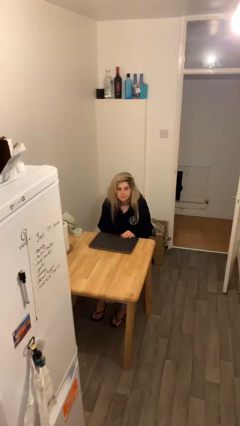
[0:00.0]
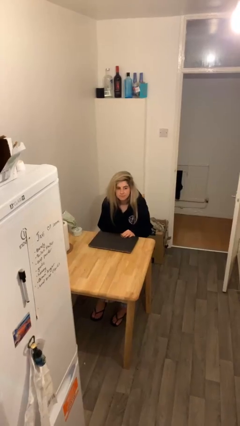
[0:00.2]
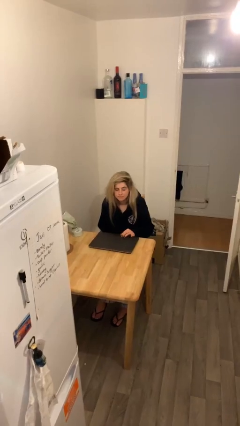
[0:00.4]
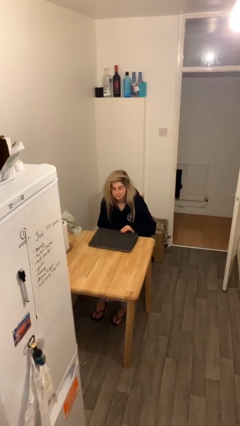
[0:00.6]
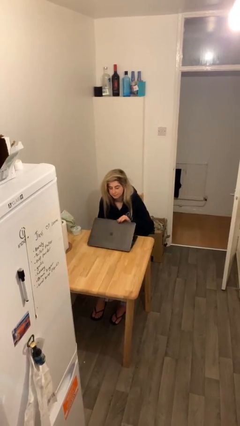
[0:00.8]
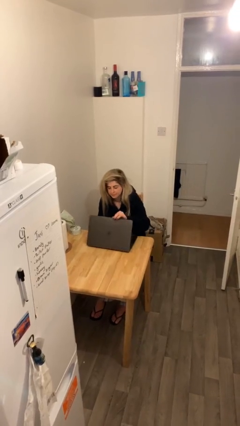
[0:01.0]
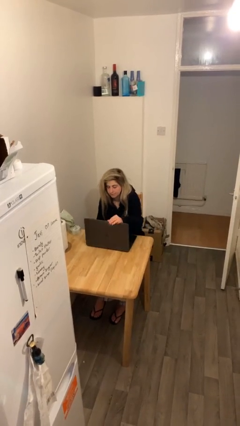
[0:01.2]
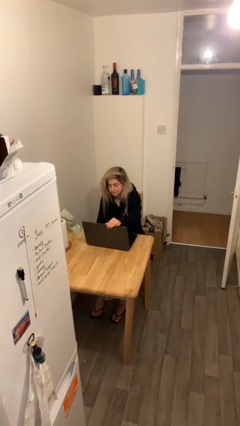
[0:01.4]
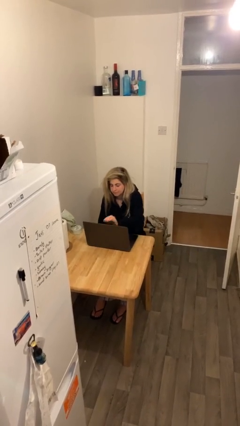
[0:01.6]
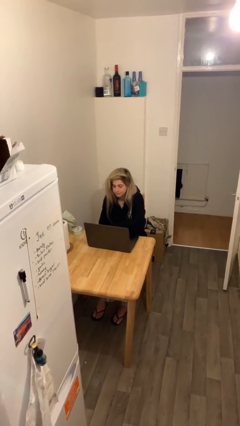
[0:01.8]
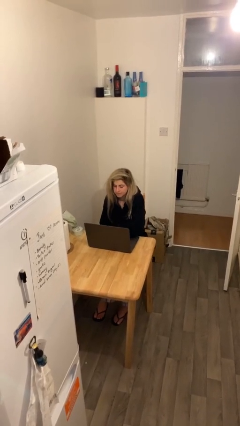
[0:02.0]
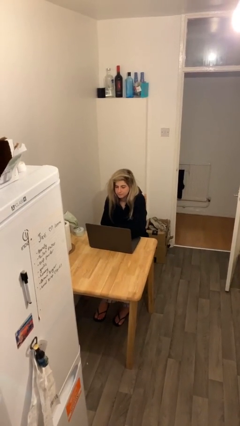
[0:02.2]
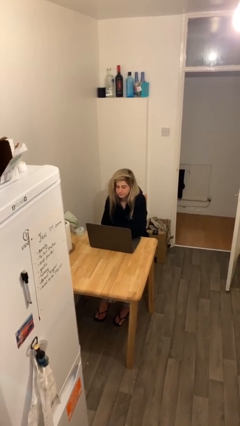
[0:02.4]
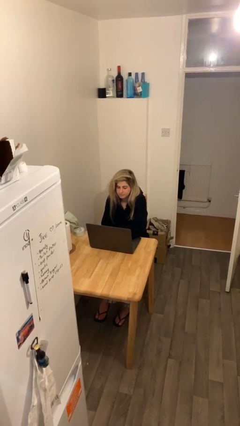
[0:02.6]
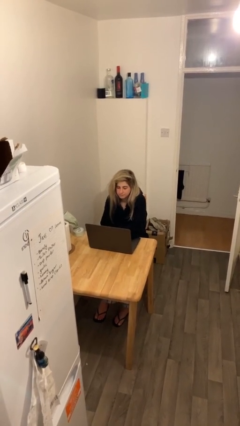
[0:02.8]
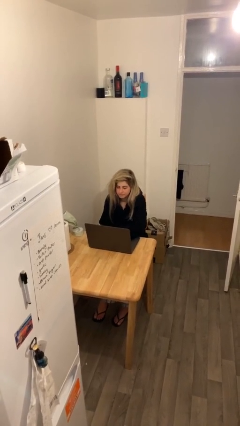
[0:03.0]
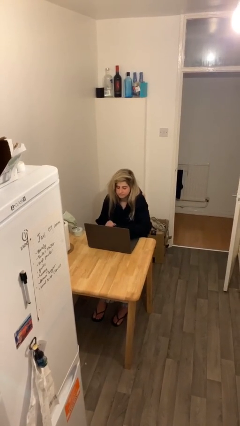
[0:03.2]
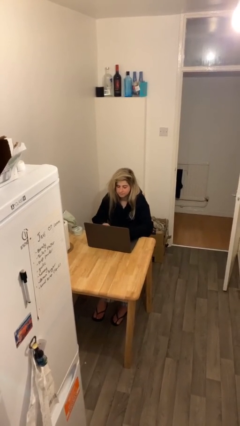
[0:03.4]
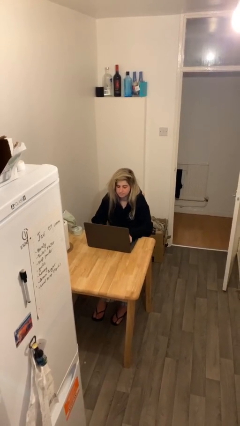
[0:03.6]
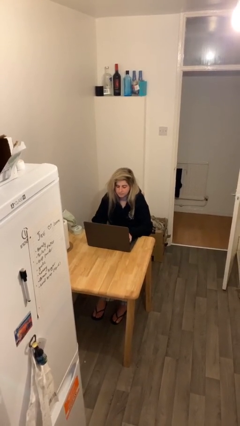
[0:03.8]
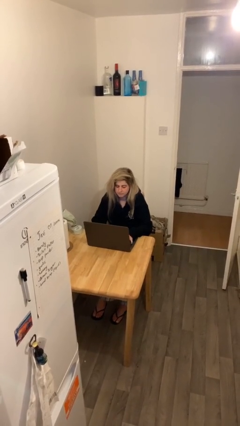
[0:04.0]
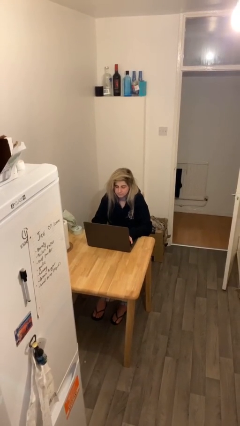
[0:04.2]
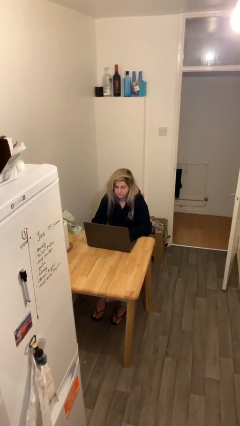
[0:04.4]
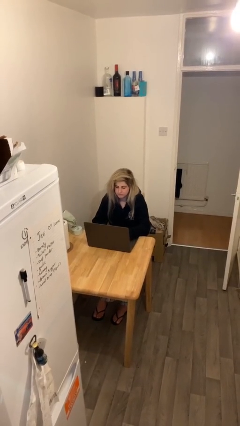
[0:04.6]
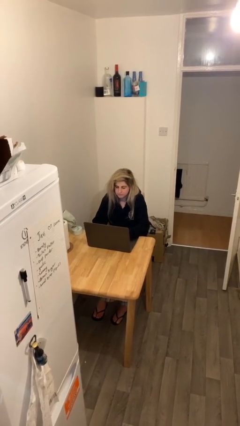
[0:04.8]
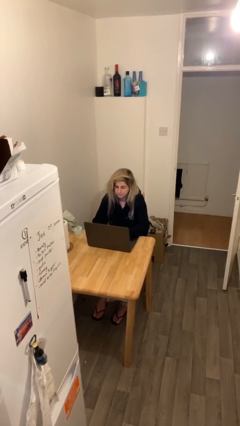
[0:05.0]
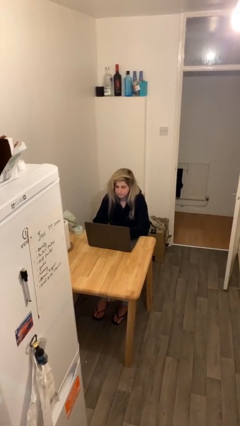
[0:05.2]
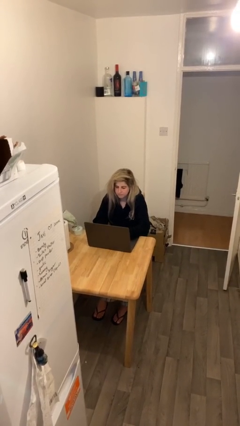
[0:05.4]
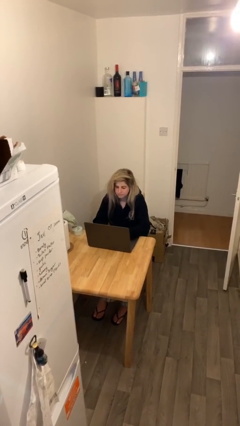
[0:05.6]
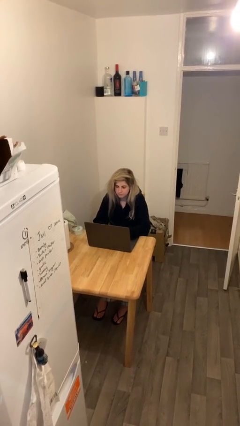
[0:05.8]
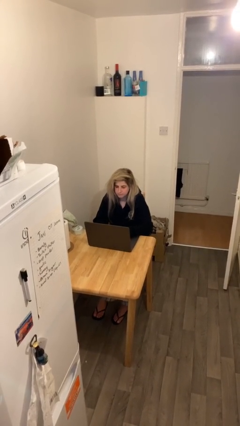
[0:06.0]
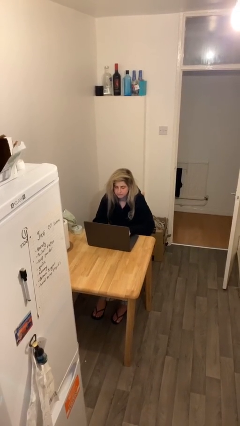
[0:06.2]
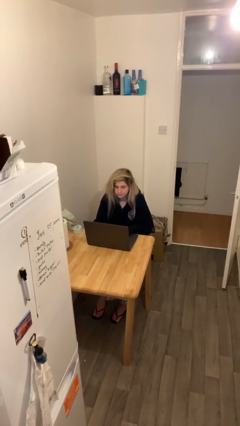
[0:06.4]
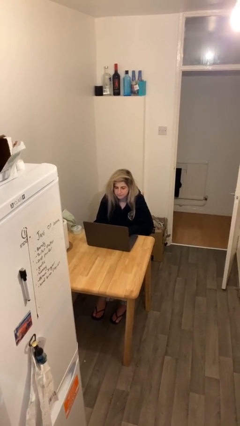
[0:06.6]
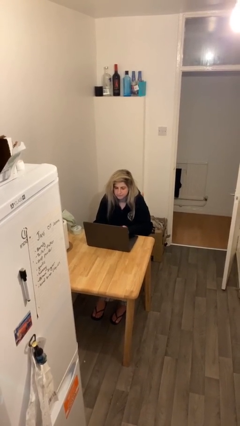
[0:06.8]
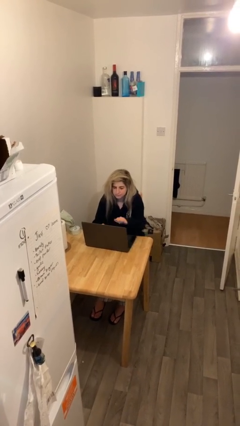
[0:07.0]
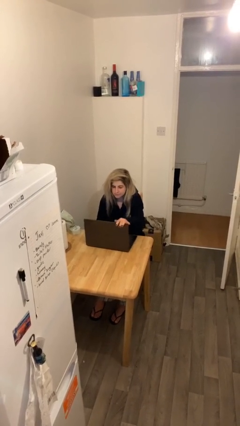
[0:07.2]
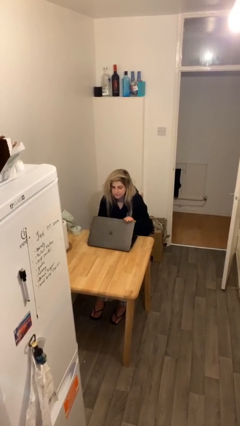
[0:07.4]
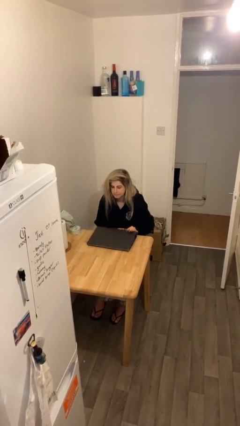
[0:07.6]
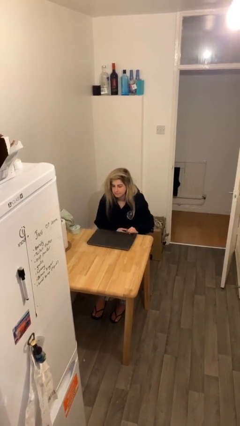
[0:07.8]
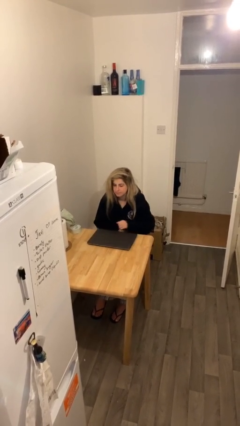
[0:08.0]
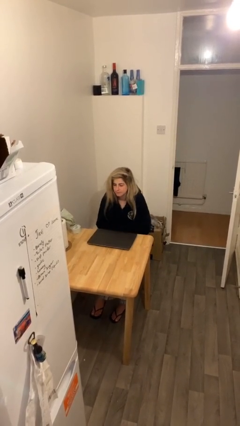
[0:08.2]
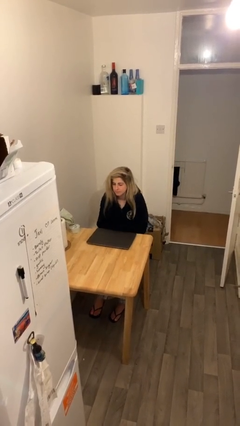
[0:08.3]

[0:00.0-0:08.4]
person interacts with laptop

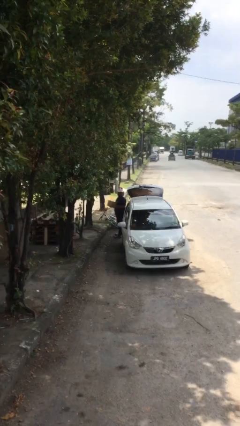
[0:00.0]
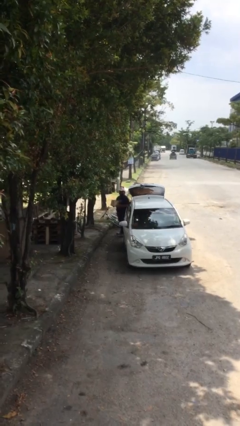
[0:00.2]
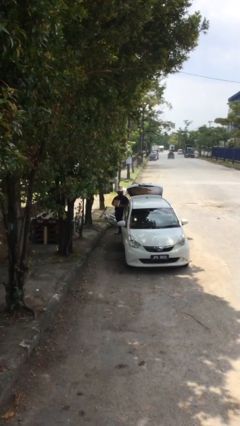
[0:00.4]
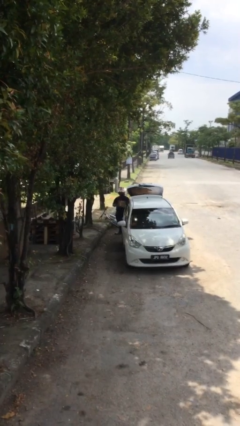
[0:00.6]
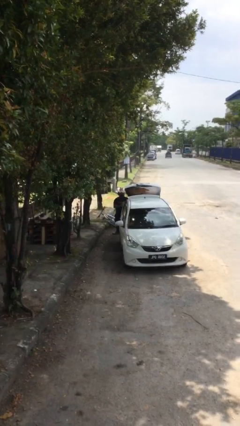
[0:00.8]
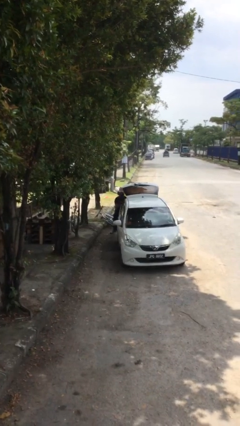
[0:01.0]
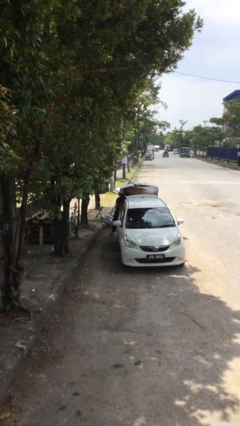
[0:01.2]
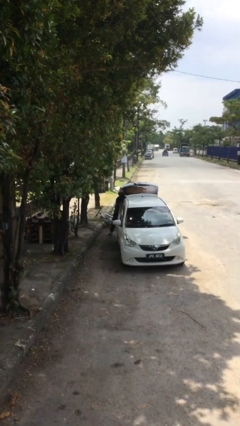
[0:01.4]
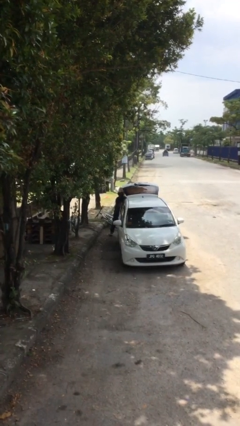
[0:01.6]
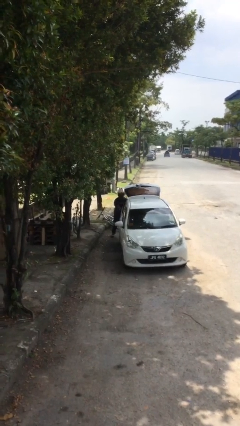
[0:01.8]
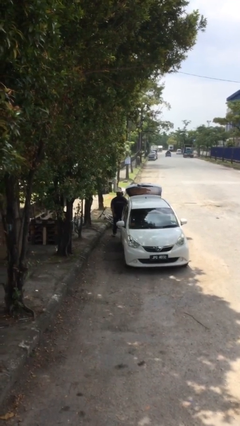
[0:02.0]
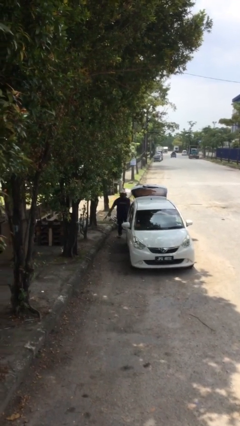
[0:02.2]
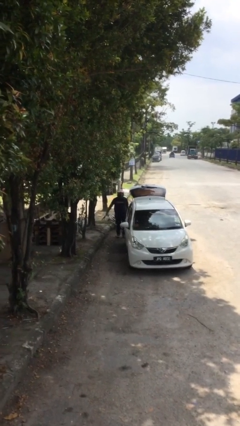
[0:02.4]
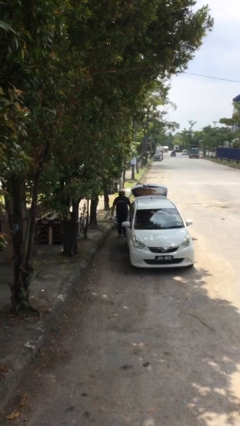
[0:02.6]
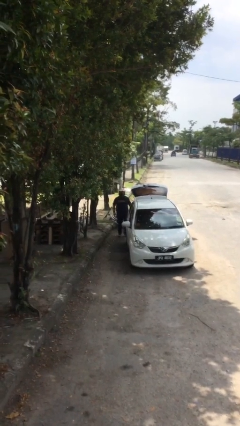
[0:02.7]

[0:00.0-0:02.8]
person loads car

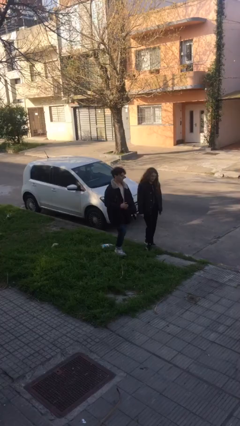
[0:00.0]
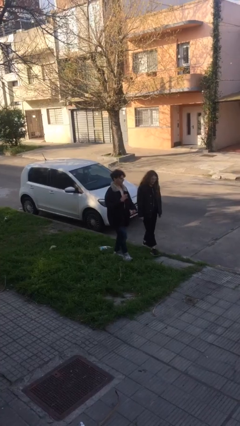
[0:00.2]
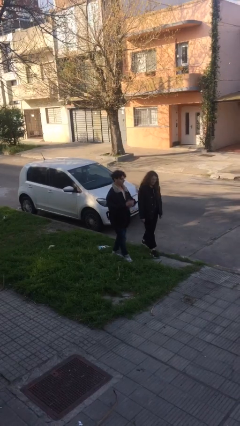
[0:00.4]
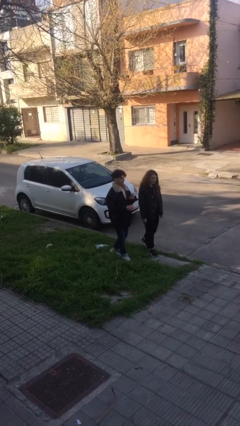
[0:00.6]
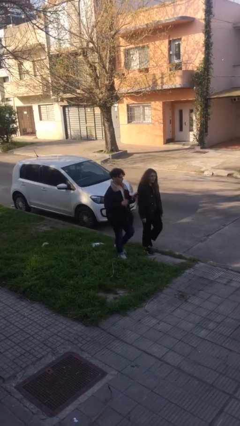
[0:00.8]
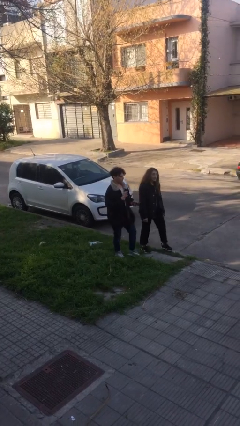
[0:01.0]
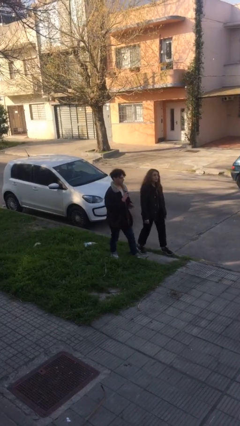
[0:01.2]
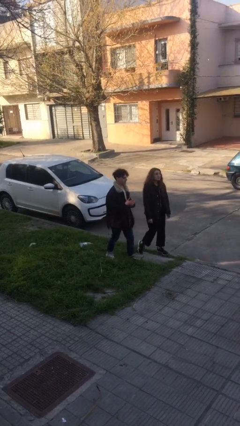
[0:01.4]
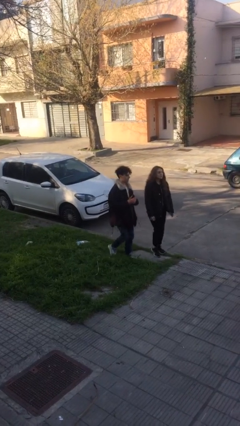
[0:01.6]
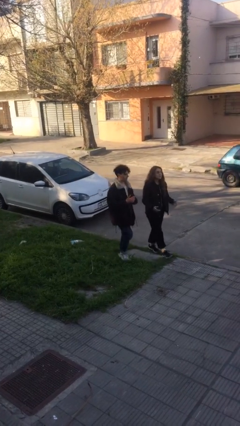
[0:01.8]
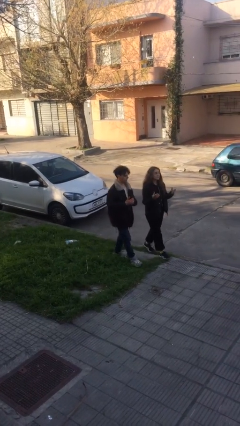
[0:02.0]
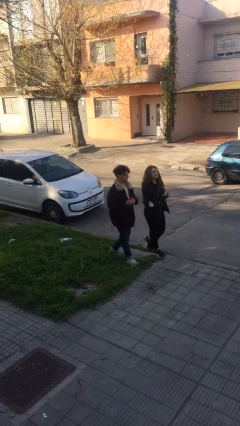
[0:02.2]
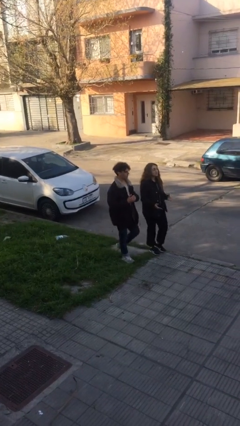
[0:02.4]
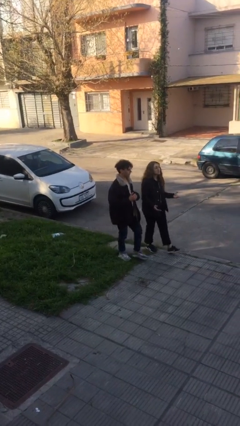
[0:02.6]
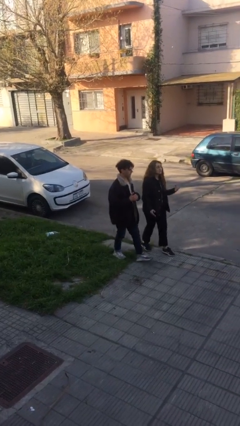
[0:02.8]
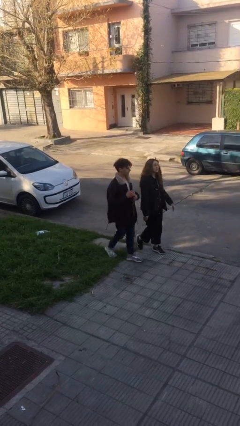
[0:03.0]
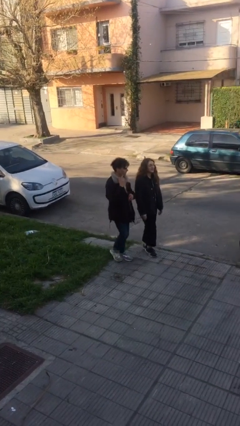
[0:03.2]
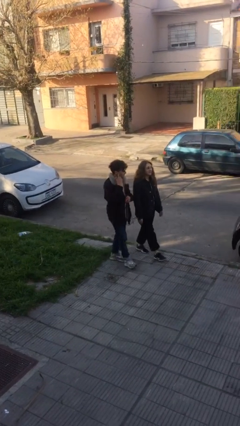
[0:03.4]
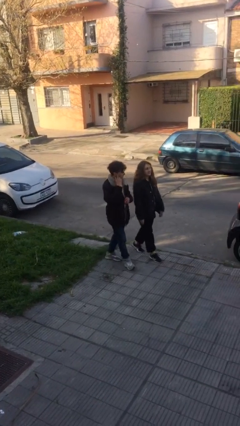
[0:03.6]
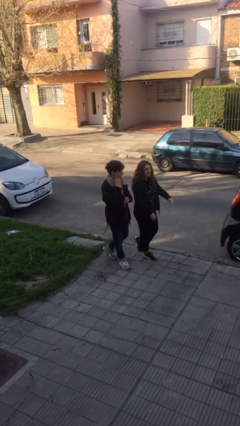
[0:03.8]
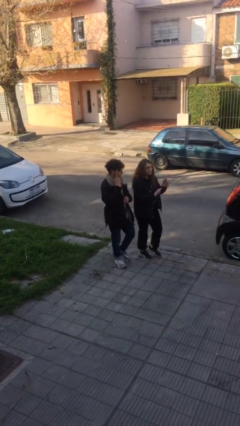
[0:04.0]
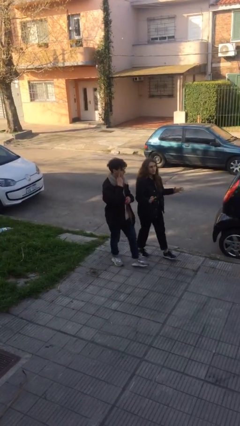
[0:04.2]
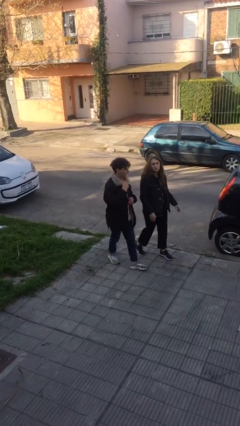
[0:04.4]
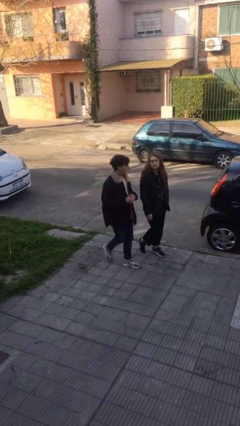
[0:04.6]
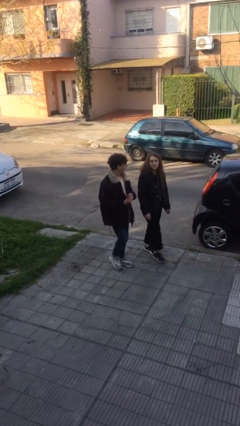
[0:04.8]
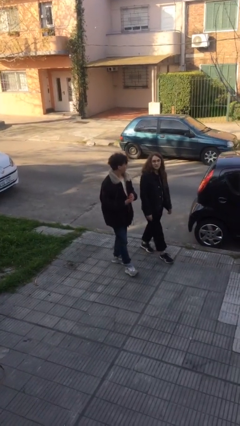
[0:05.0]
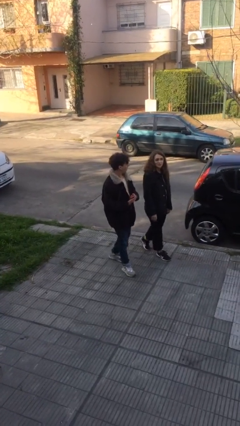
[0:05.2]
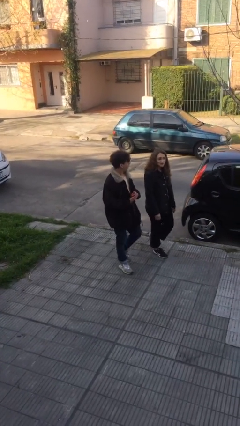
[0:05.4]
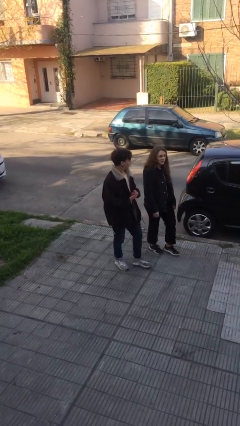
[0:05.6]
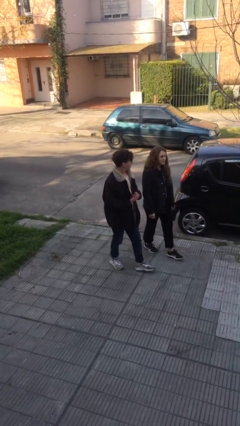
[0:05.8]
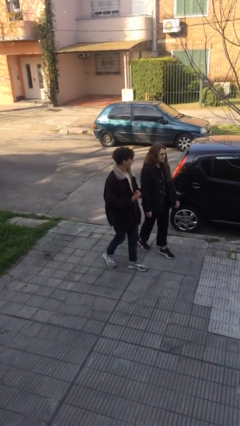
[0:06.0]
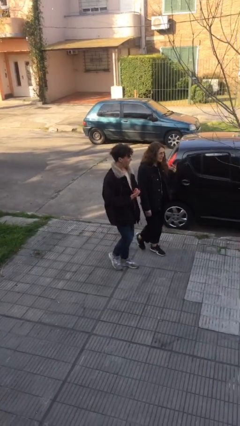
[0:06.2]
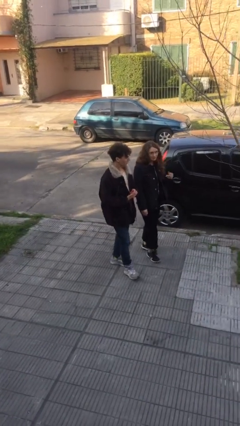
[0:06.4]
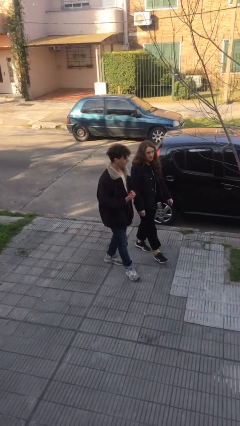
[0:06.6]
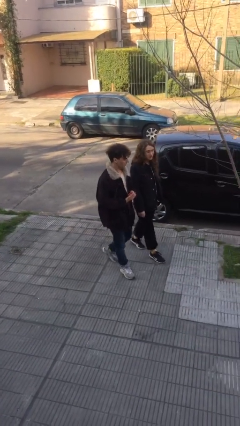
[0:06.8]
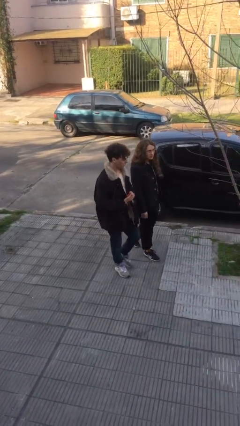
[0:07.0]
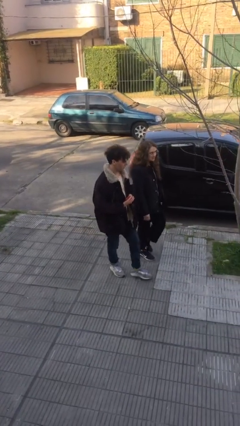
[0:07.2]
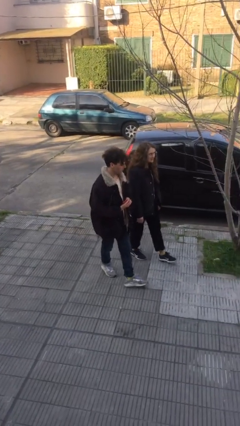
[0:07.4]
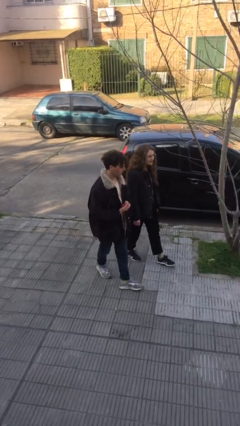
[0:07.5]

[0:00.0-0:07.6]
person talks to person
